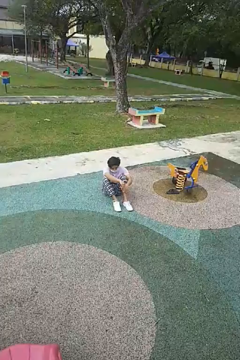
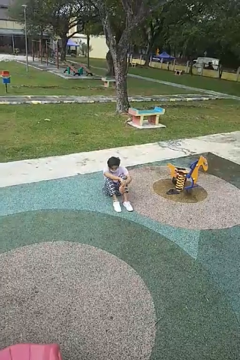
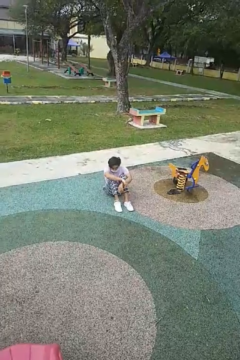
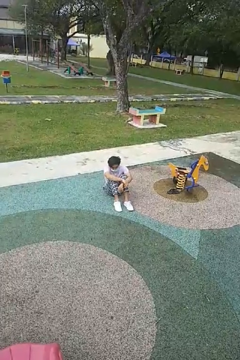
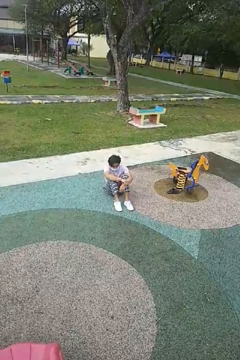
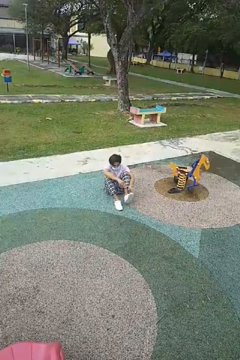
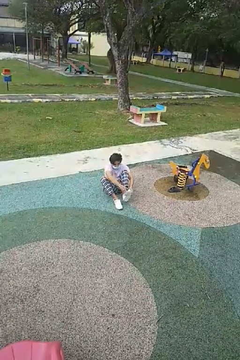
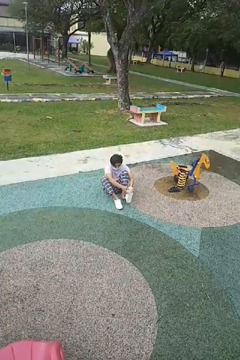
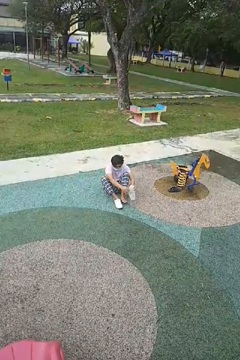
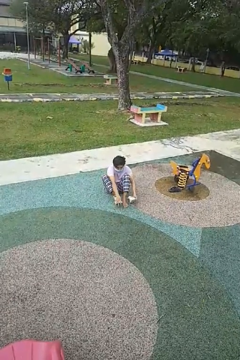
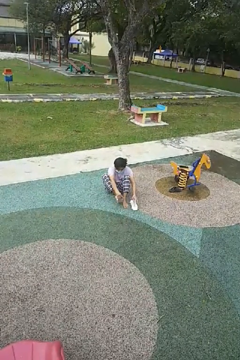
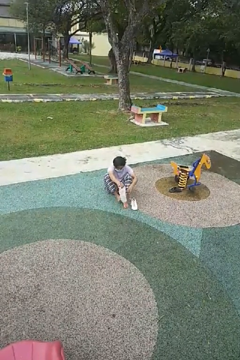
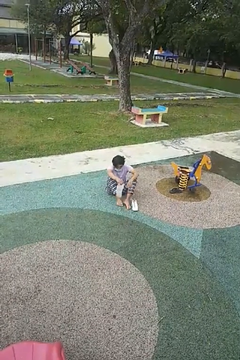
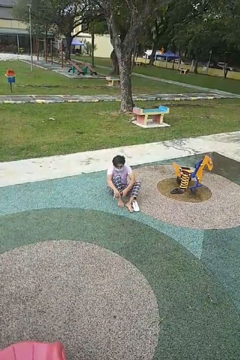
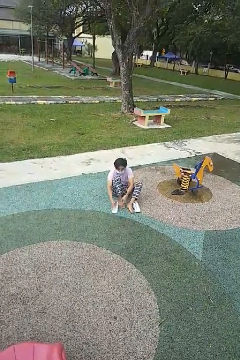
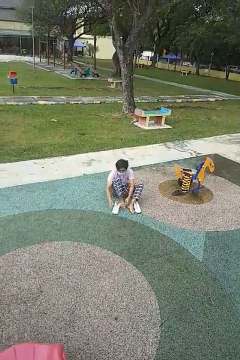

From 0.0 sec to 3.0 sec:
person takes off shoes

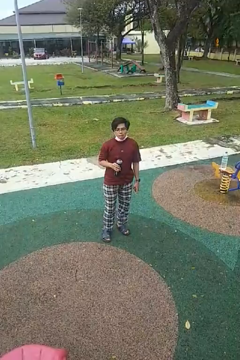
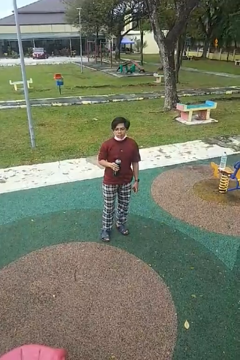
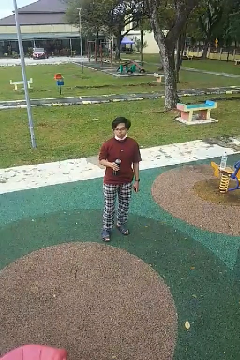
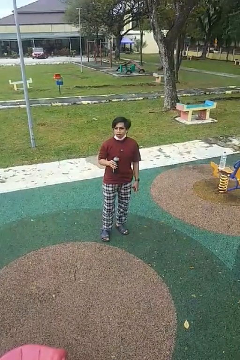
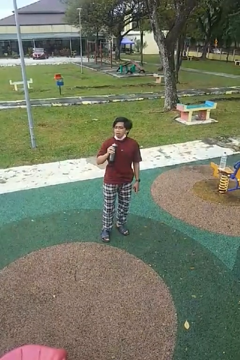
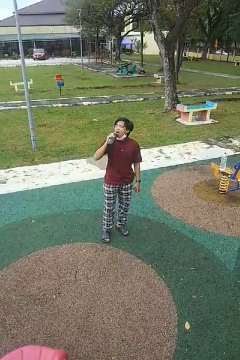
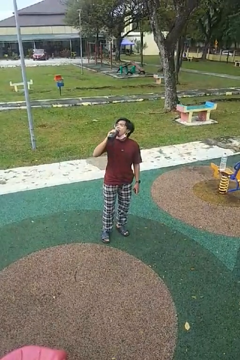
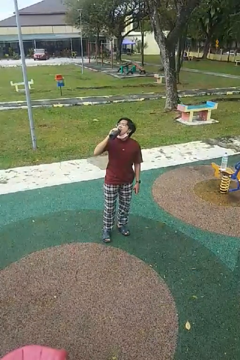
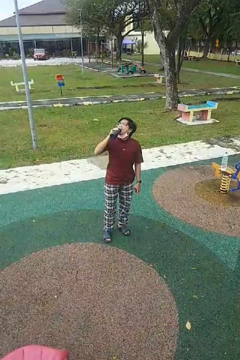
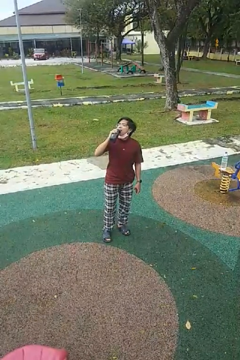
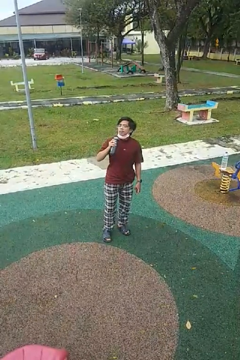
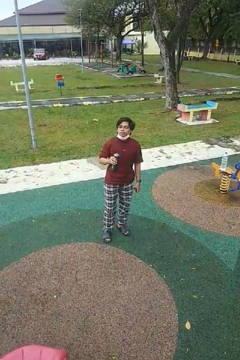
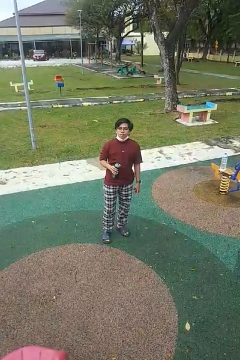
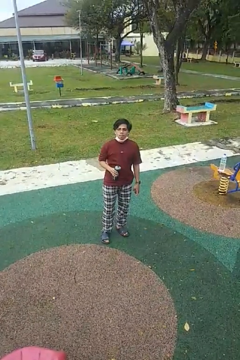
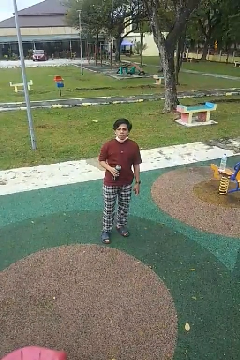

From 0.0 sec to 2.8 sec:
person drinks from bottle

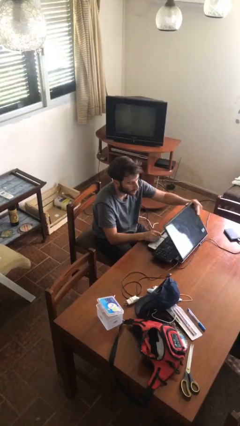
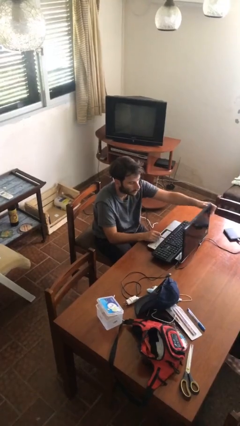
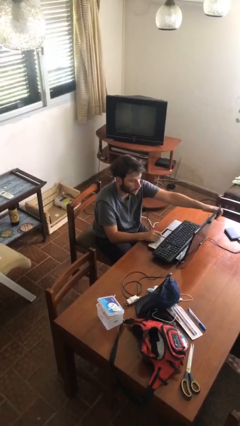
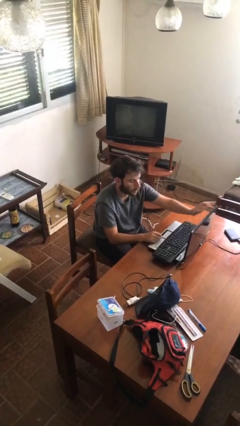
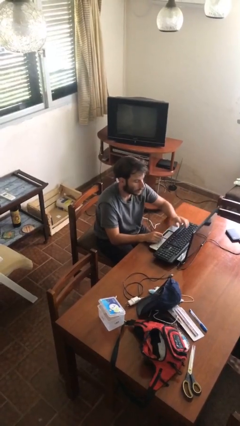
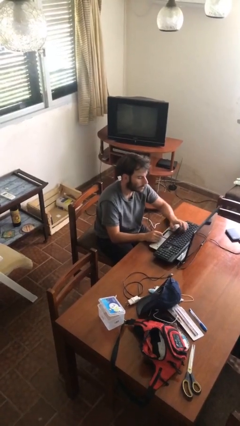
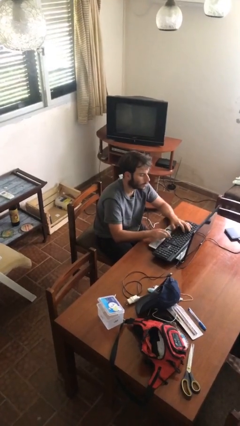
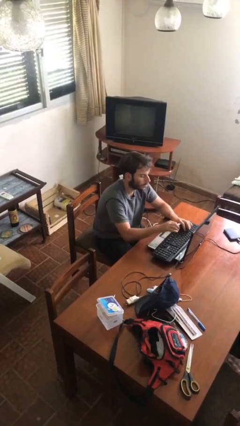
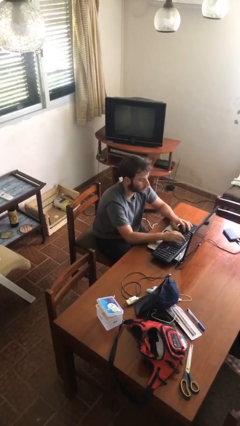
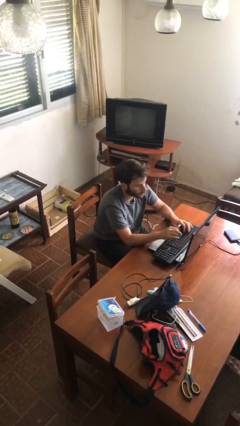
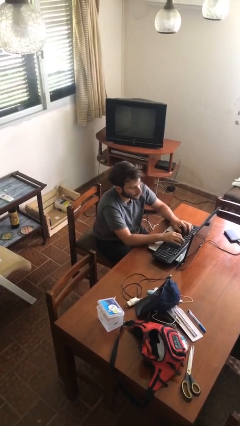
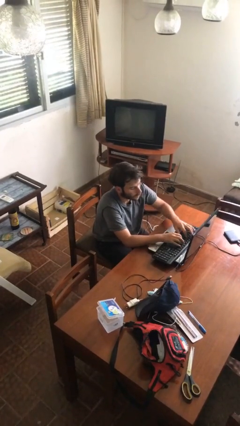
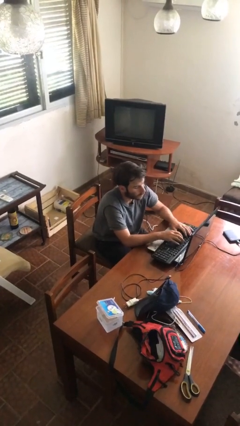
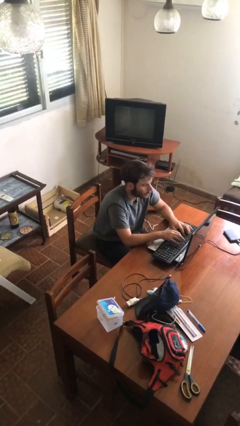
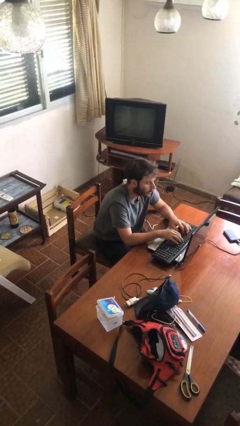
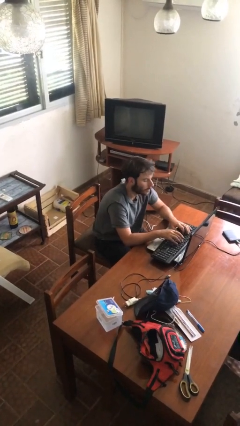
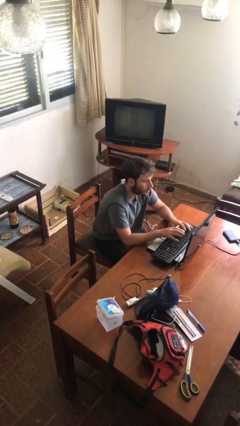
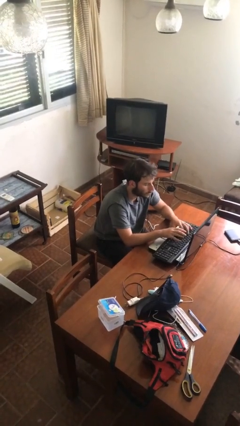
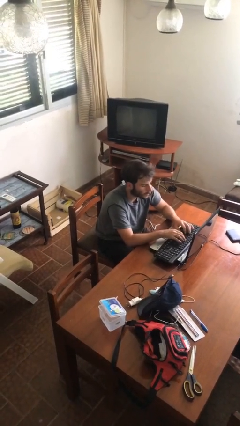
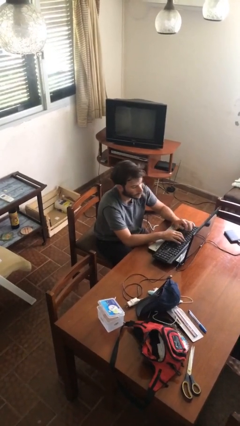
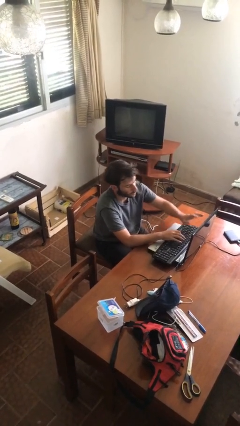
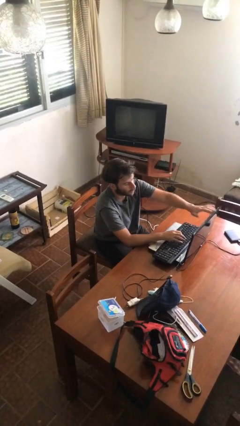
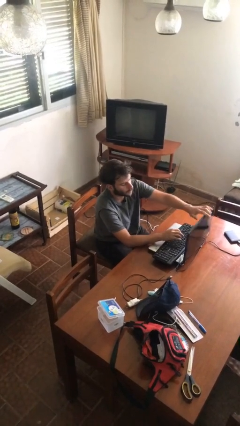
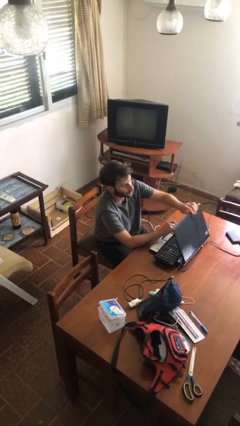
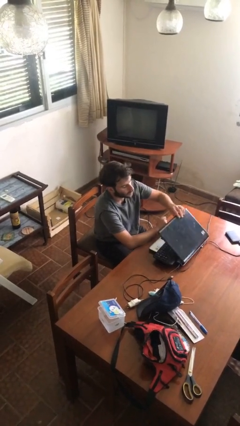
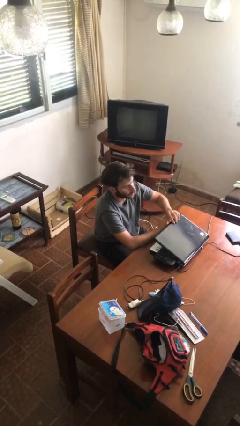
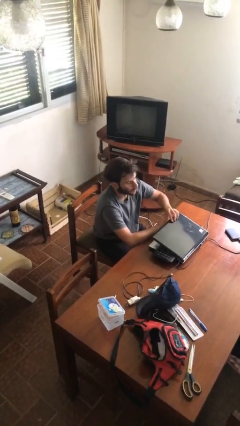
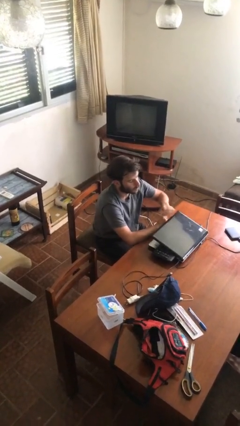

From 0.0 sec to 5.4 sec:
person interacts with laptop

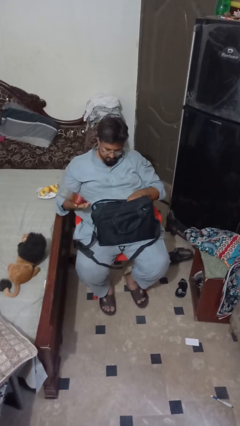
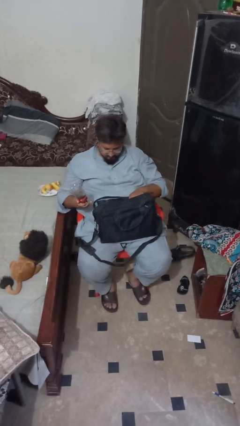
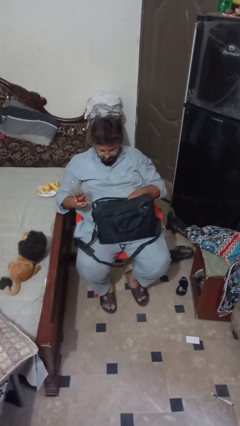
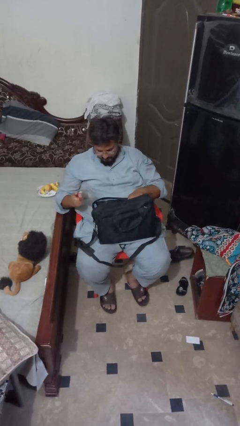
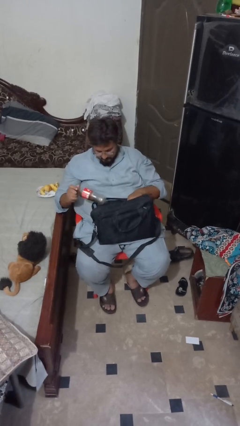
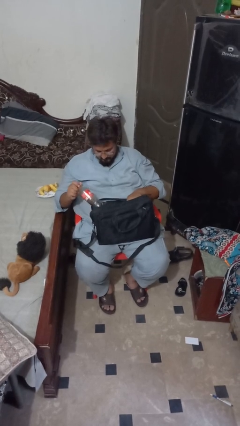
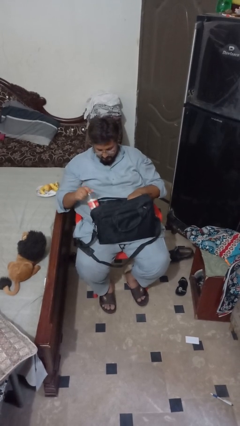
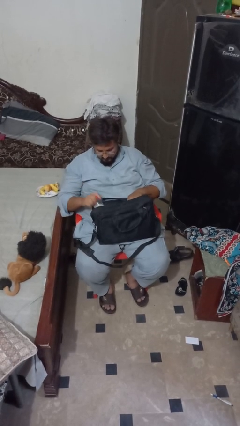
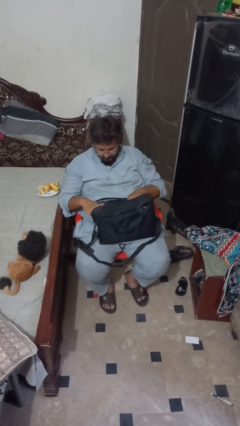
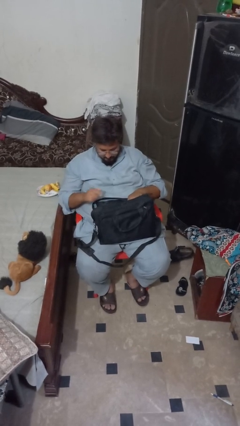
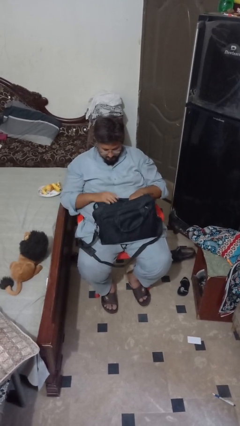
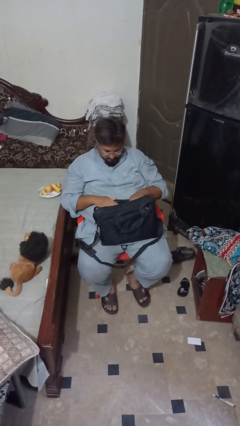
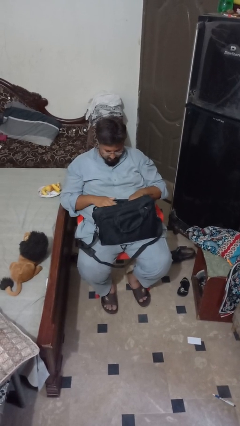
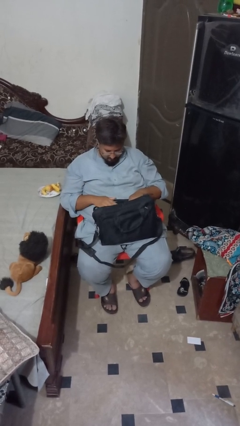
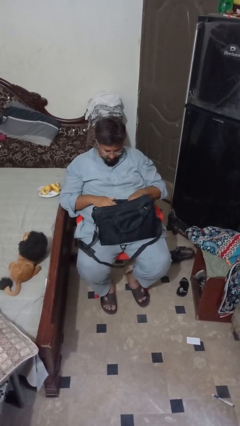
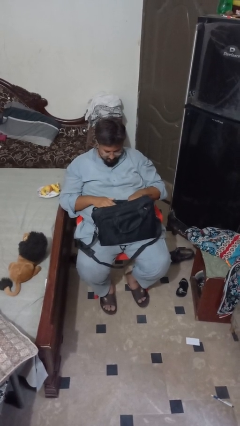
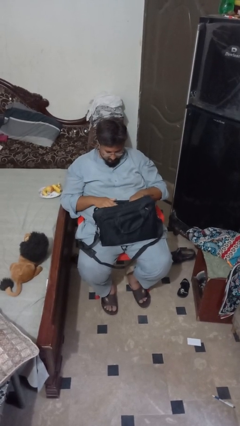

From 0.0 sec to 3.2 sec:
person puts object into bag

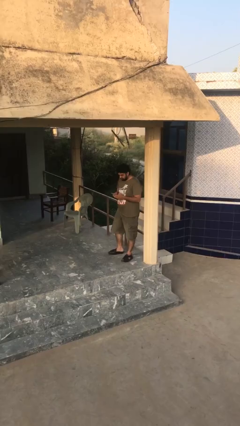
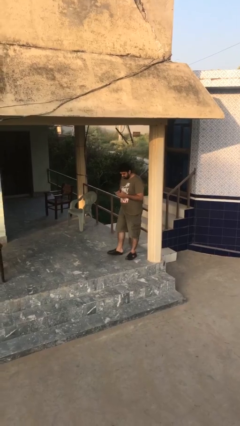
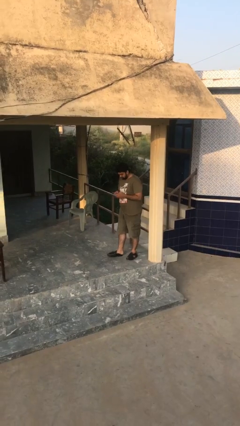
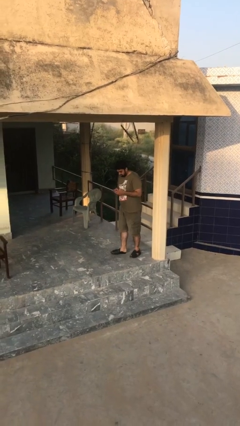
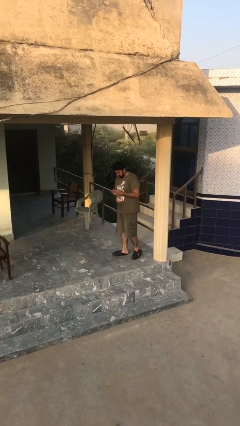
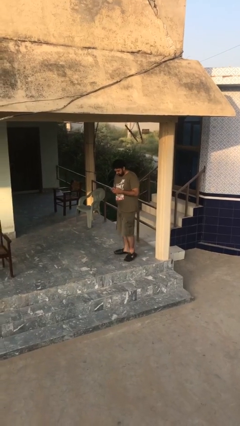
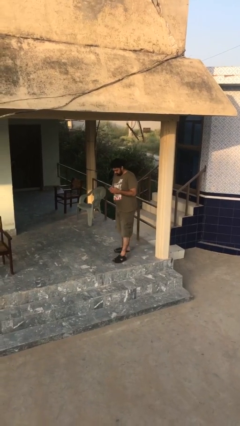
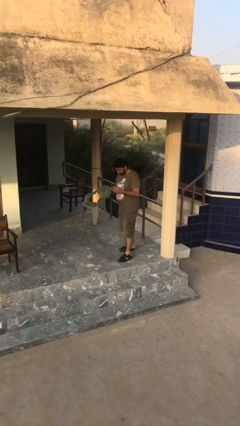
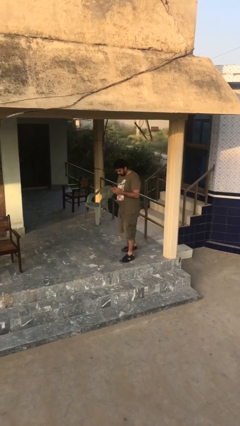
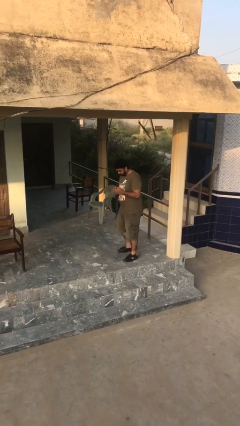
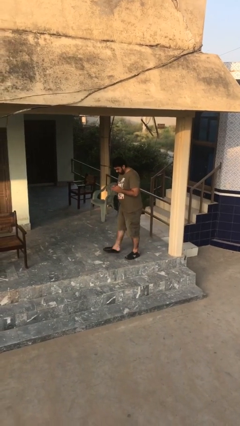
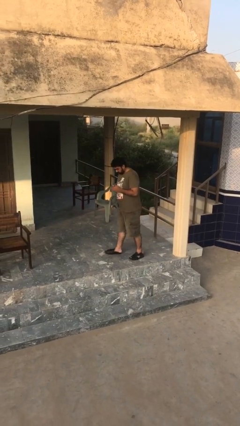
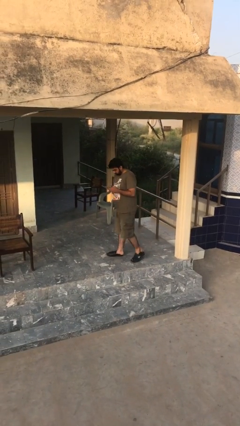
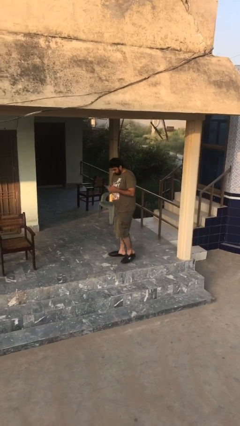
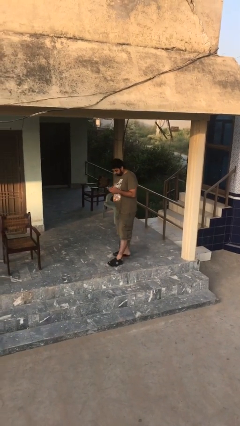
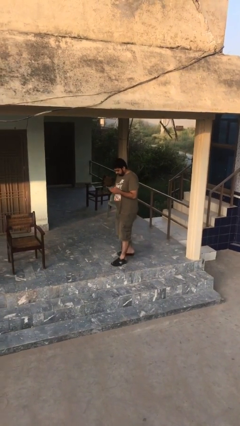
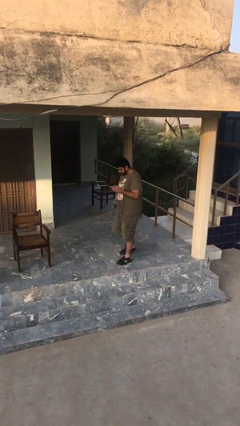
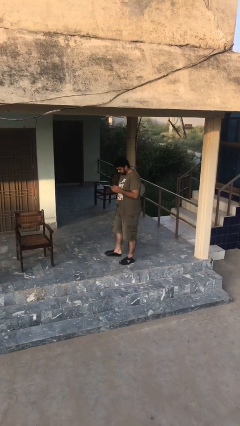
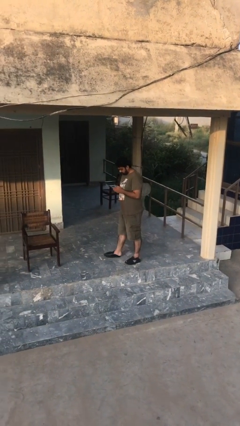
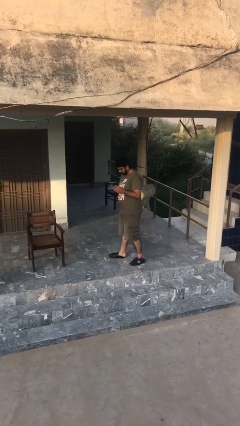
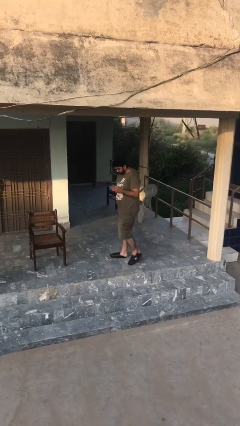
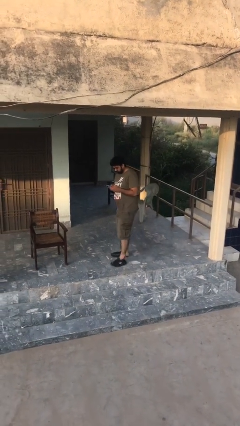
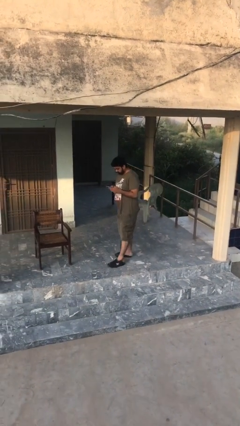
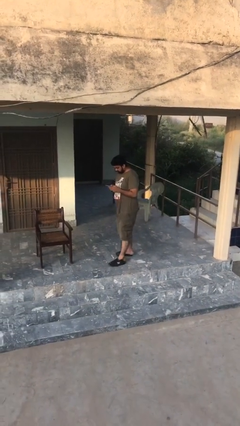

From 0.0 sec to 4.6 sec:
person texts on phone
